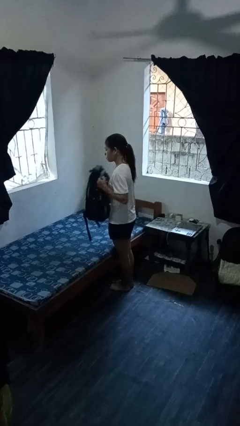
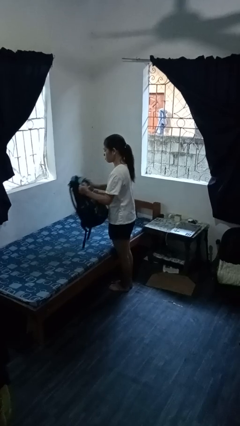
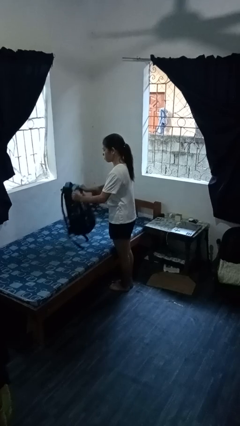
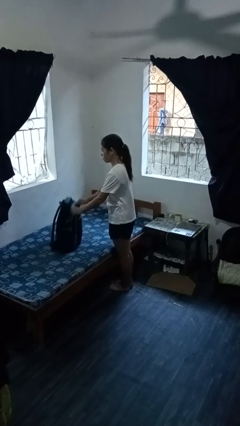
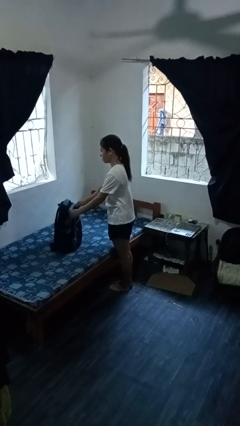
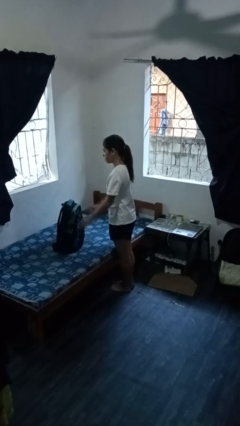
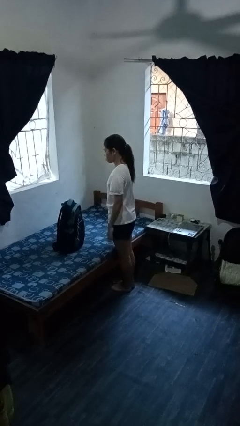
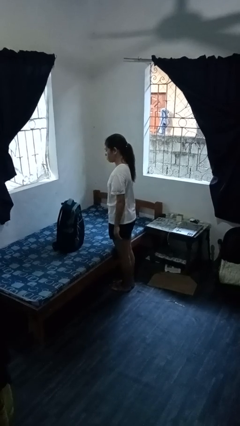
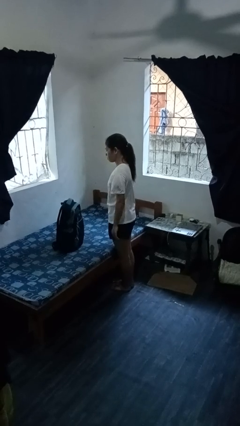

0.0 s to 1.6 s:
person puts down object on bed

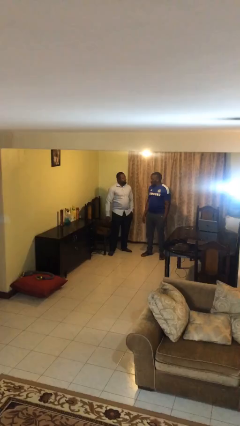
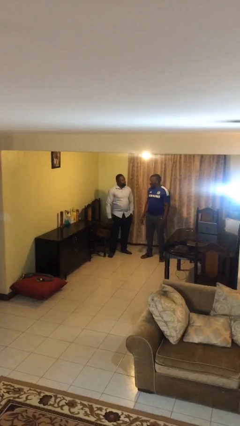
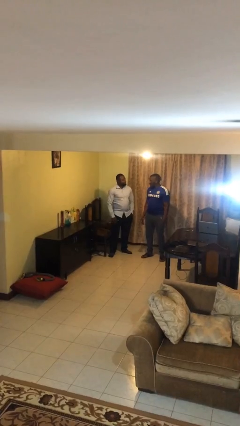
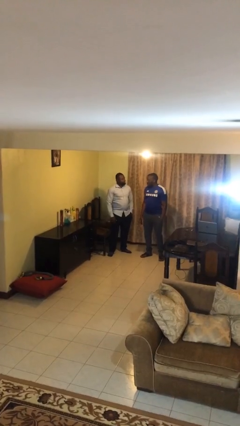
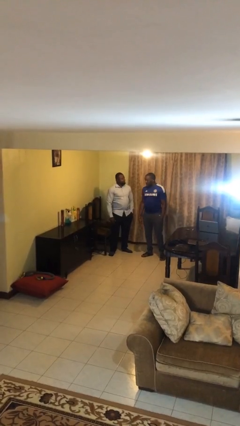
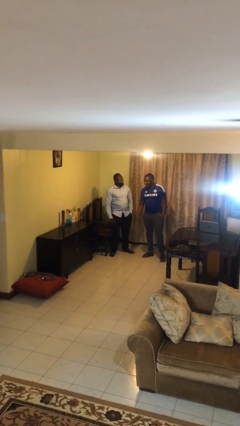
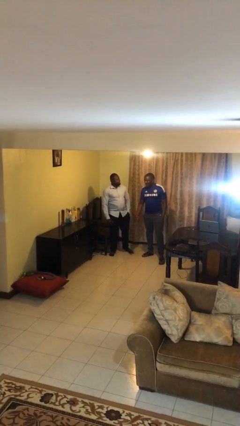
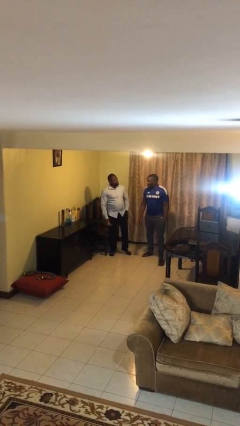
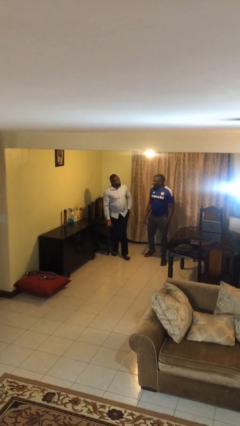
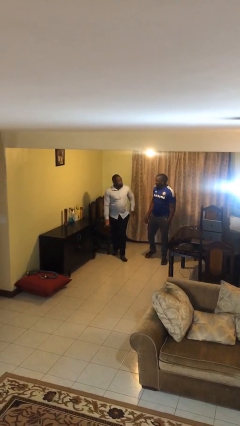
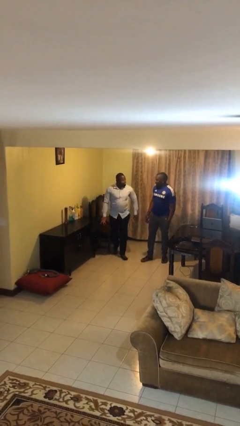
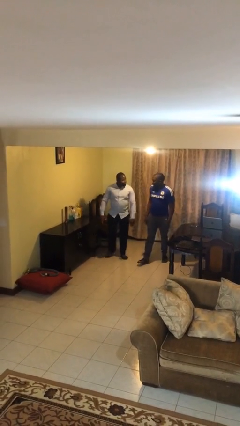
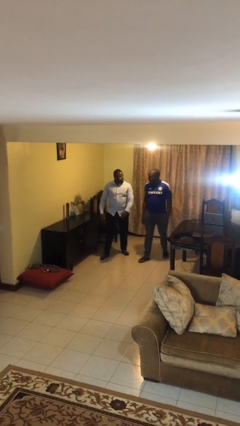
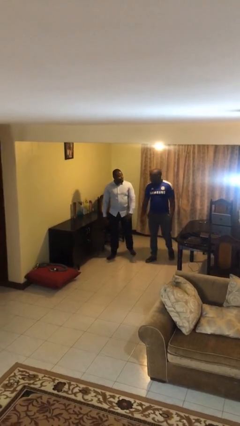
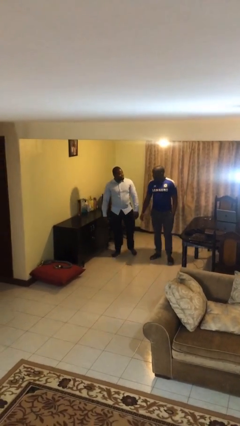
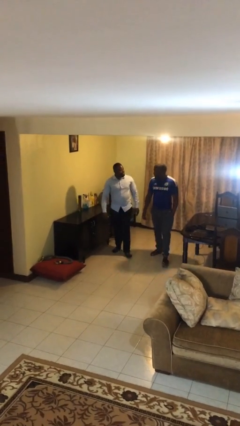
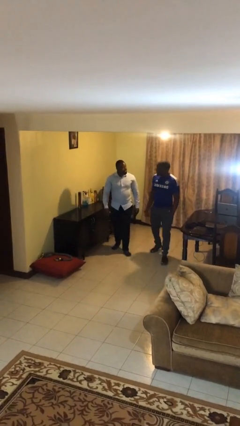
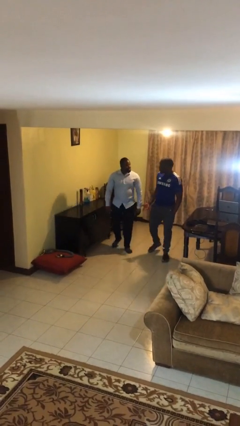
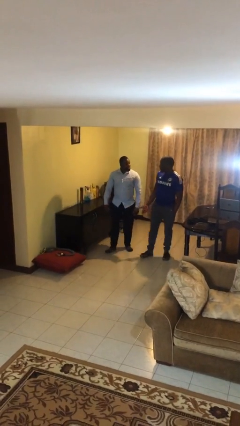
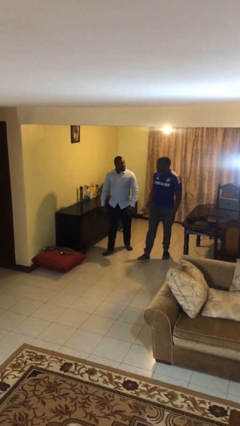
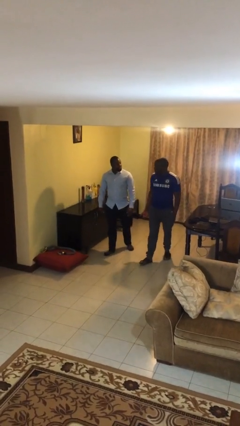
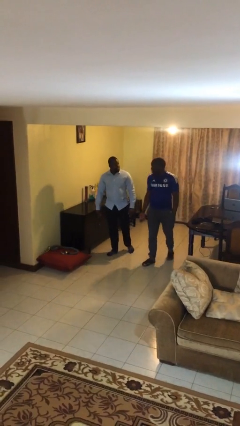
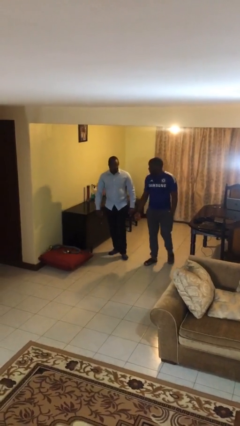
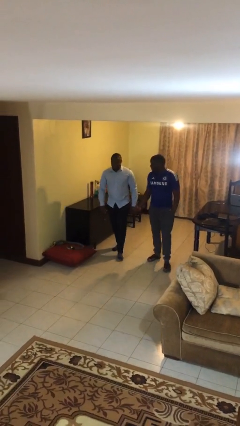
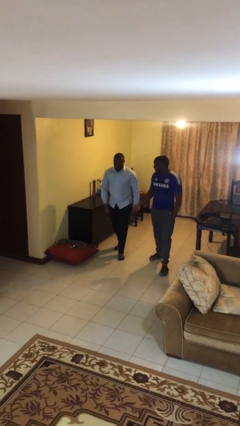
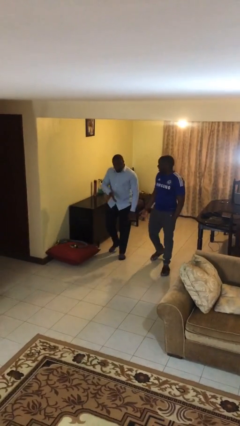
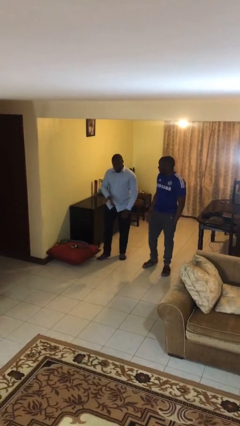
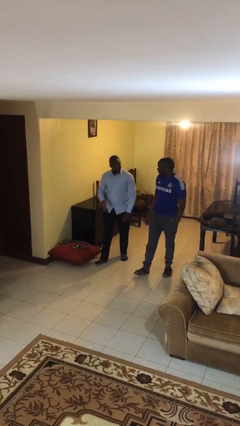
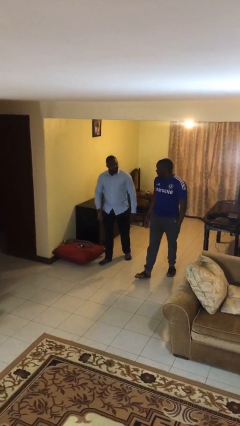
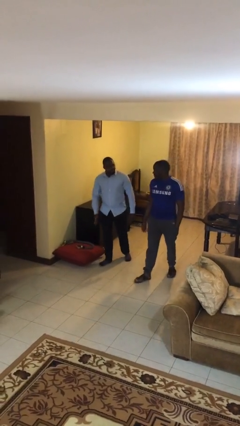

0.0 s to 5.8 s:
person talks to person

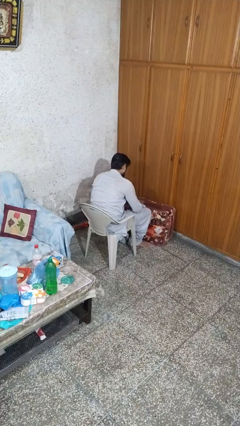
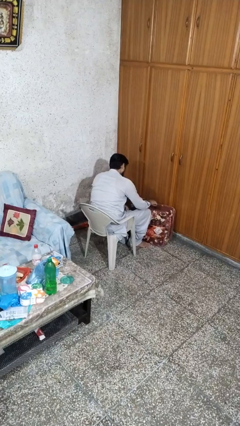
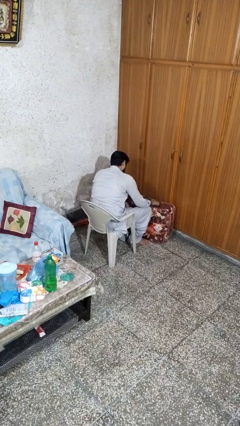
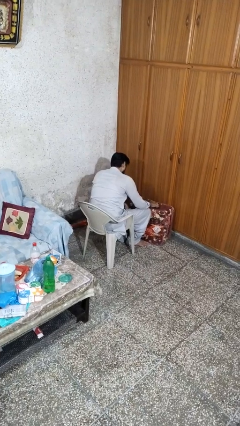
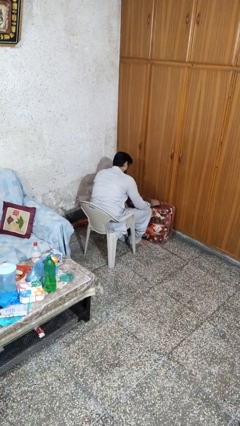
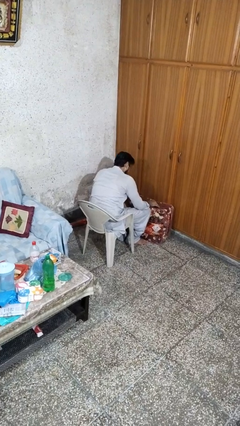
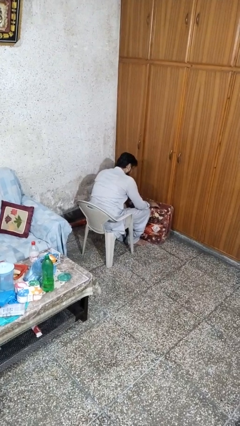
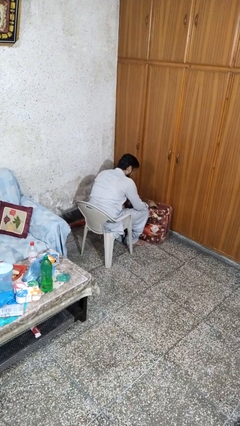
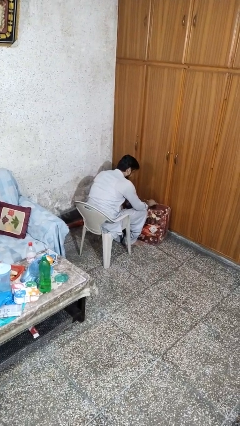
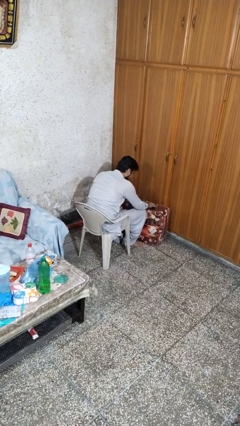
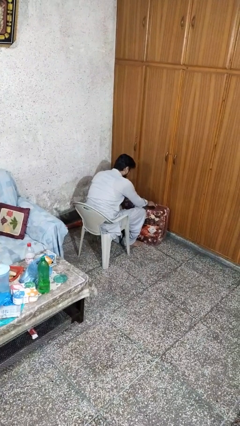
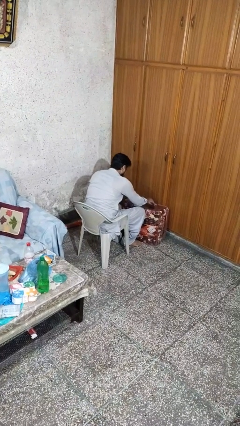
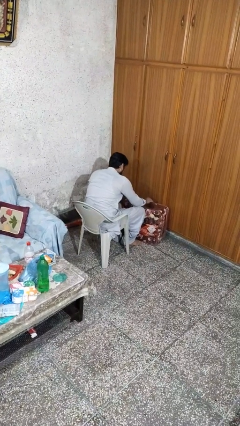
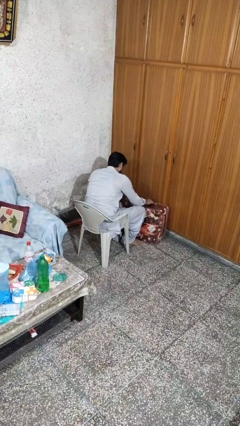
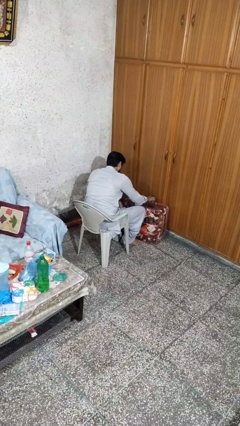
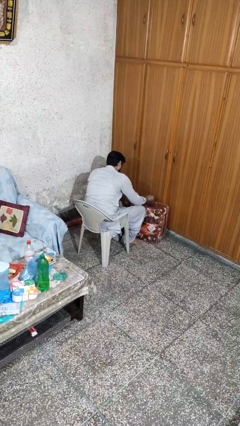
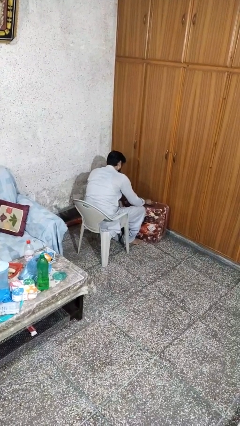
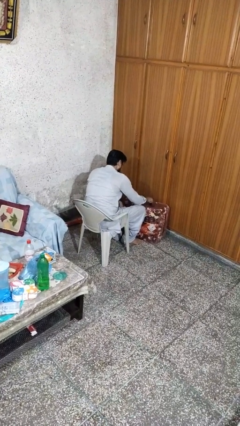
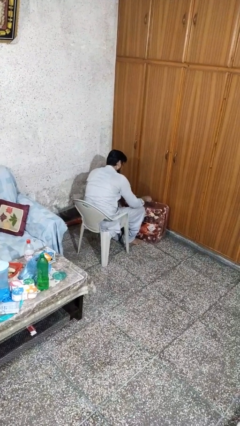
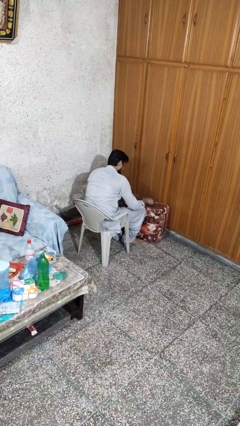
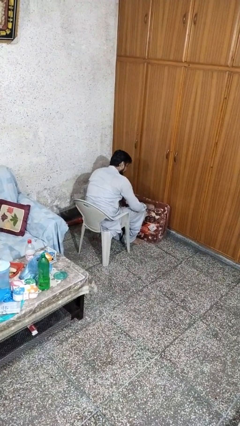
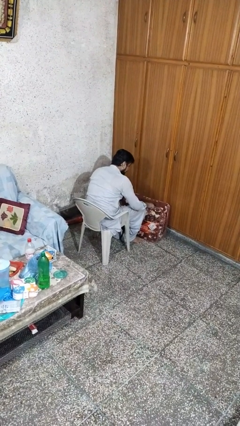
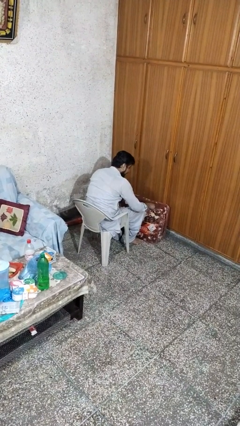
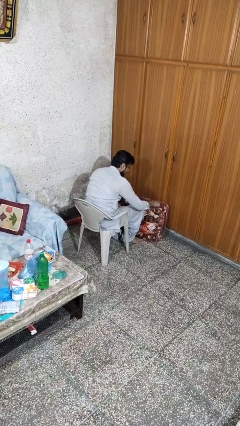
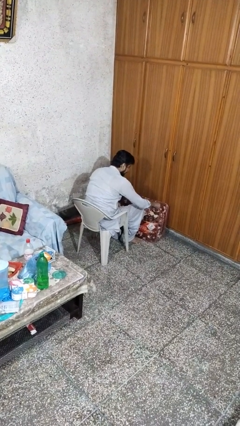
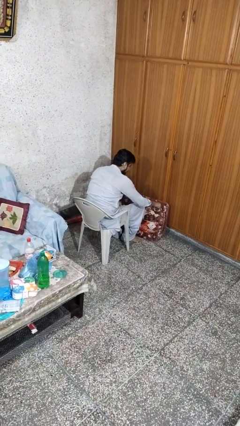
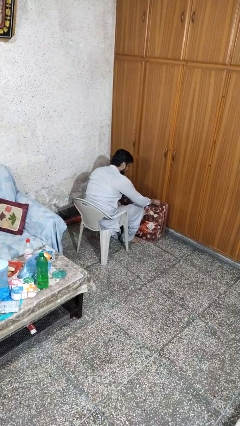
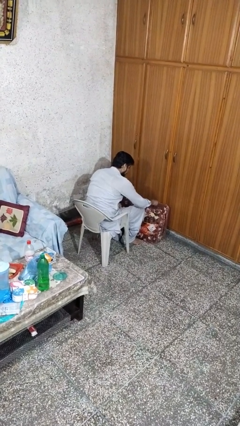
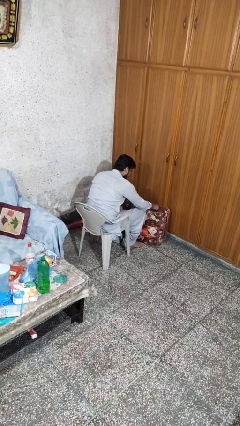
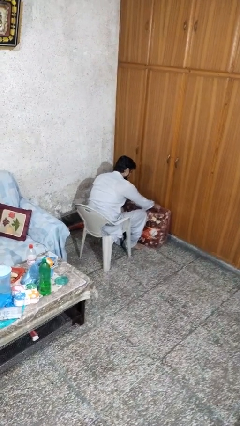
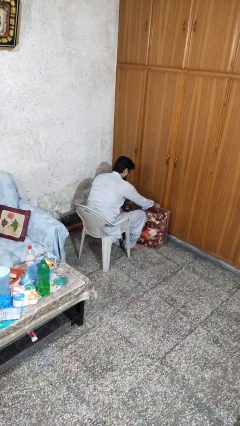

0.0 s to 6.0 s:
person taps object with finger

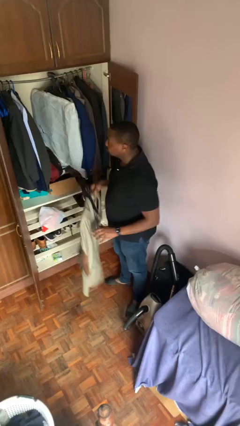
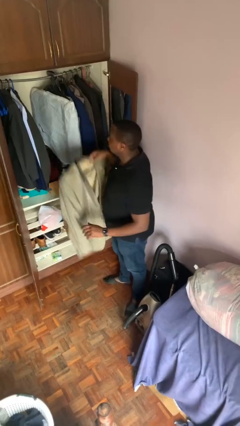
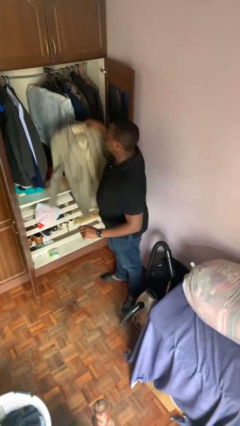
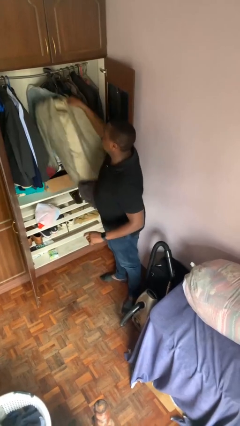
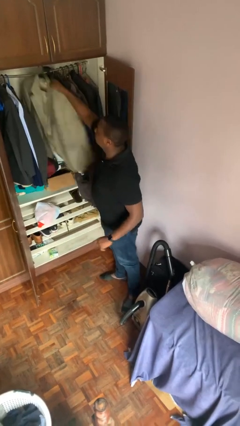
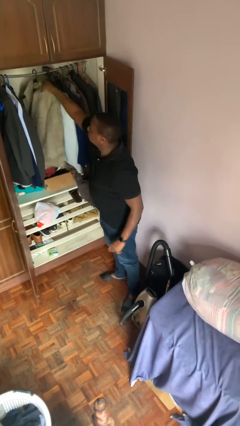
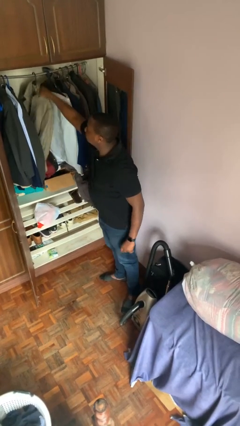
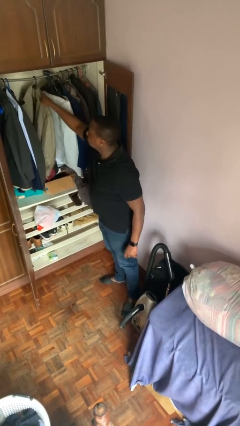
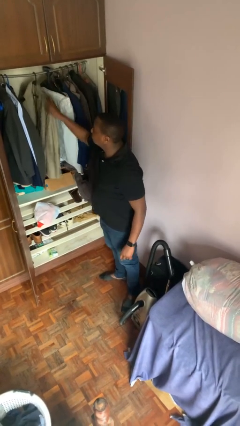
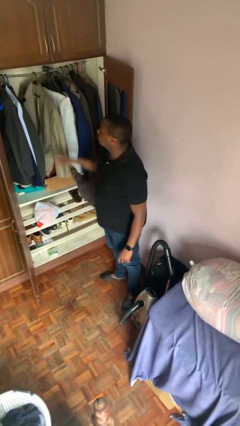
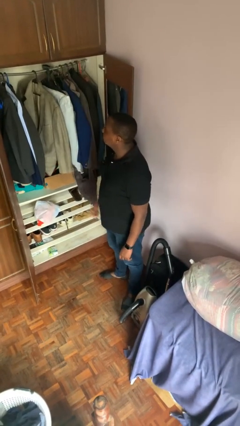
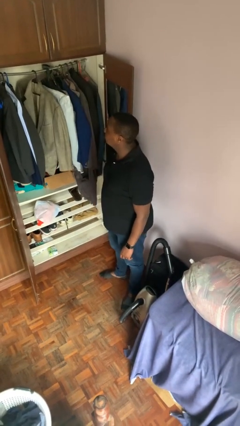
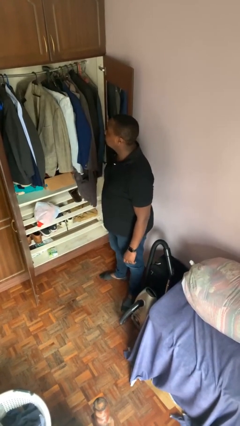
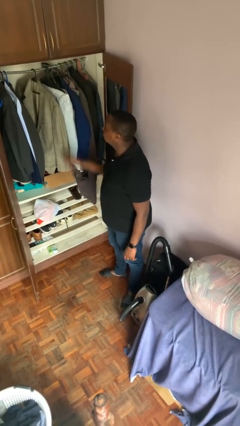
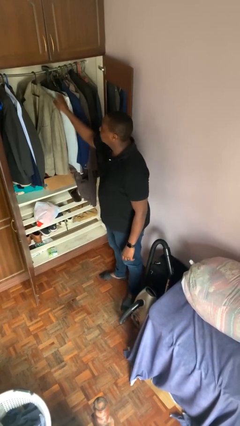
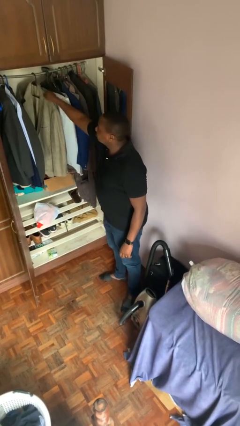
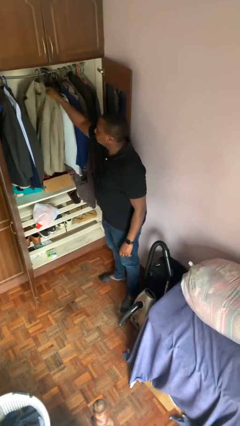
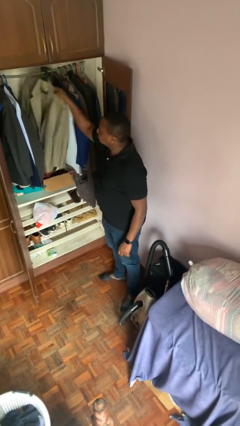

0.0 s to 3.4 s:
person puts clothes into closet

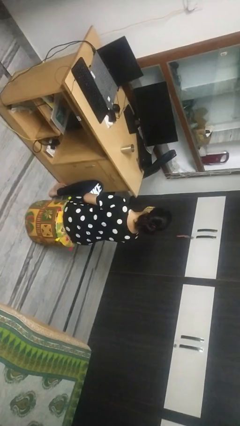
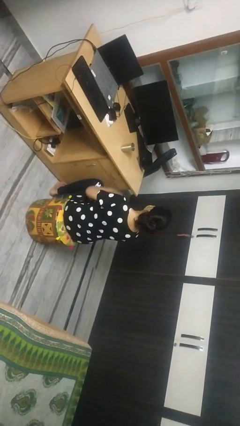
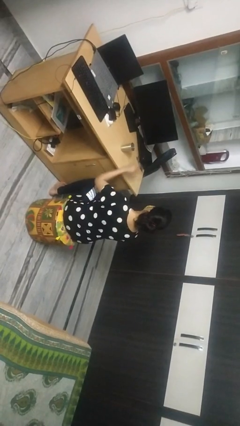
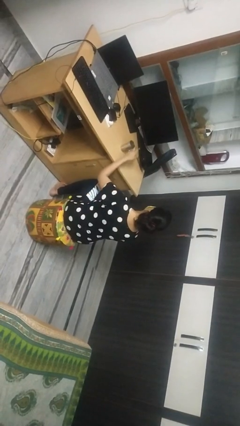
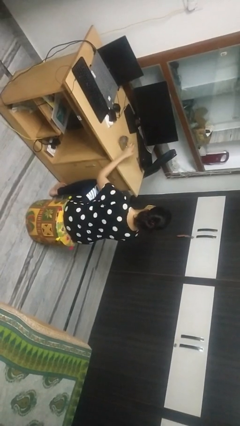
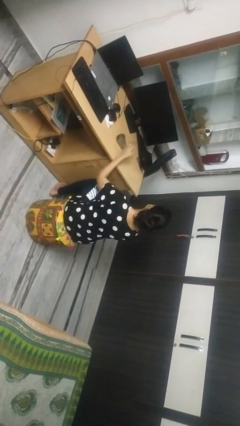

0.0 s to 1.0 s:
person knocks over glass

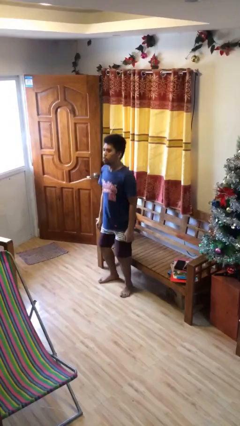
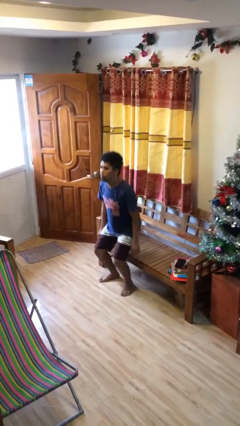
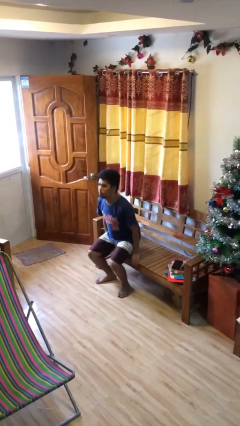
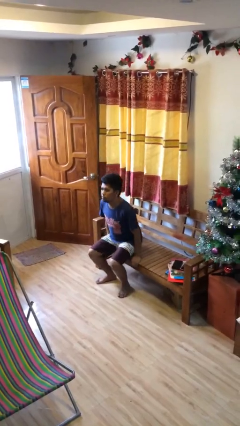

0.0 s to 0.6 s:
person sits down
